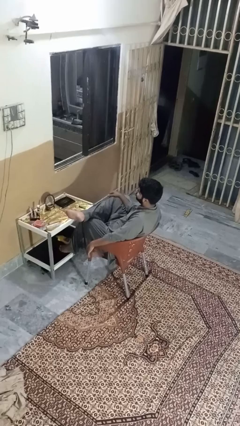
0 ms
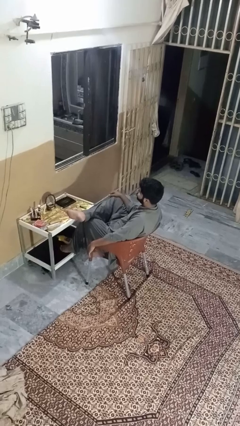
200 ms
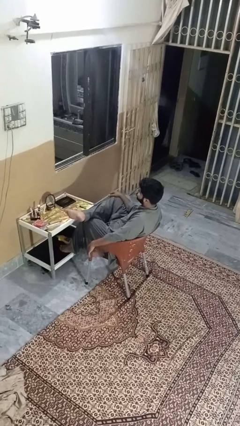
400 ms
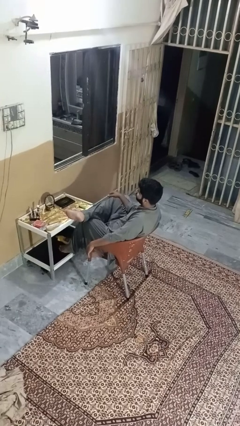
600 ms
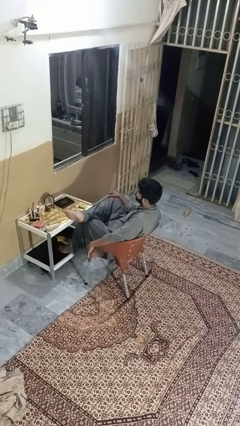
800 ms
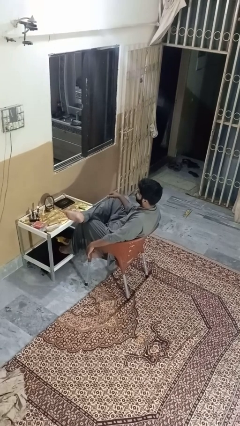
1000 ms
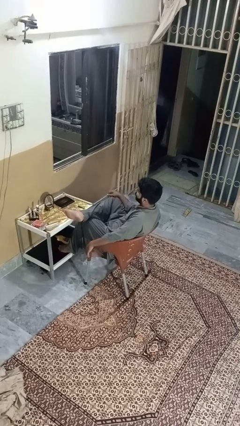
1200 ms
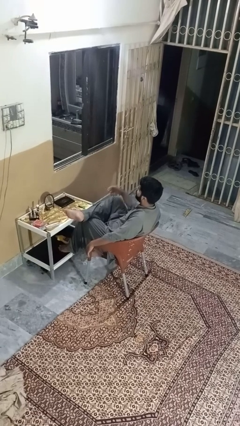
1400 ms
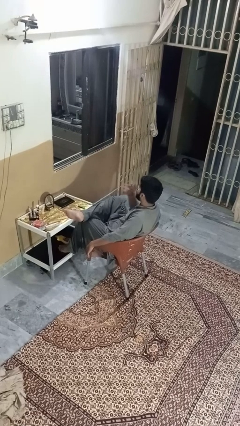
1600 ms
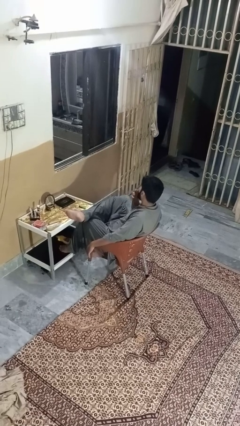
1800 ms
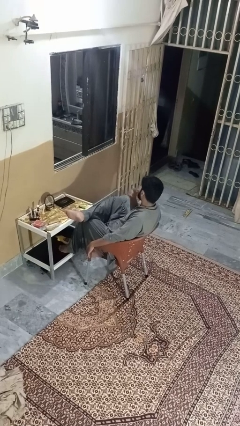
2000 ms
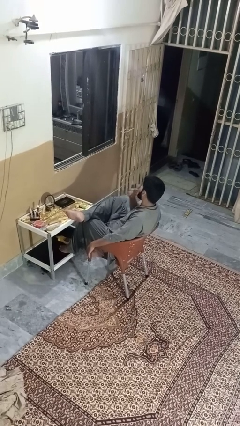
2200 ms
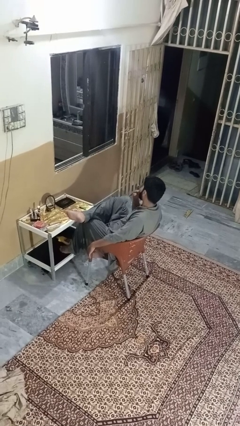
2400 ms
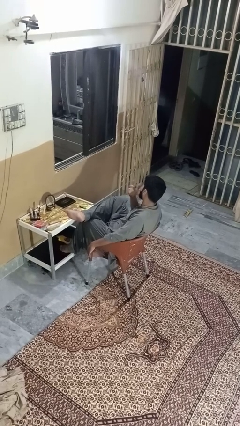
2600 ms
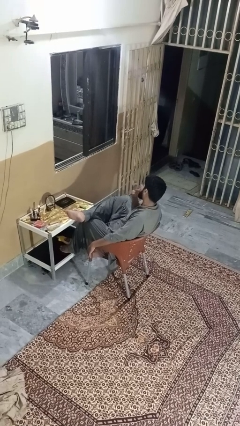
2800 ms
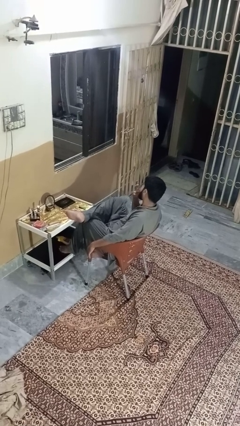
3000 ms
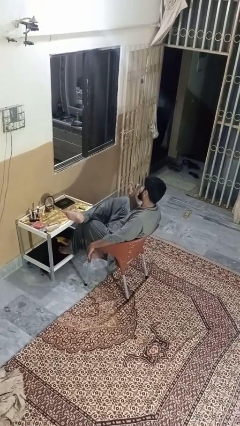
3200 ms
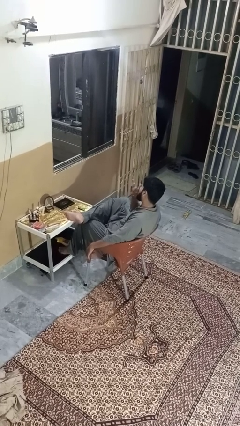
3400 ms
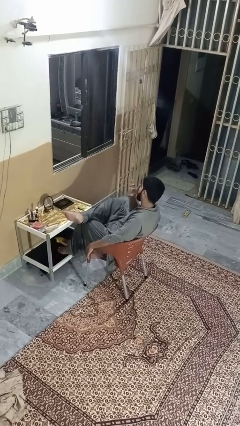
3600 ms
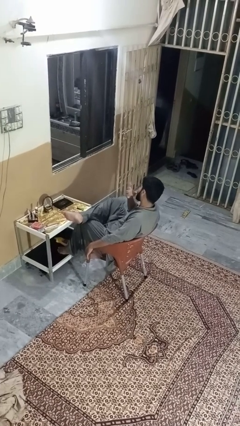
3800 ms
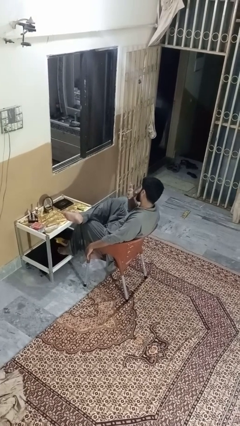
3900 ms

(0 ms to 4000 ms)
person licks fingers

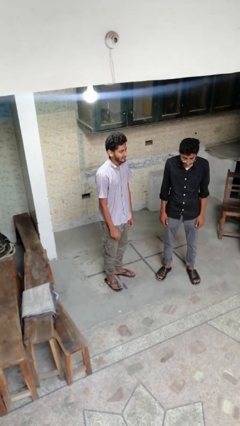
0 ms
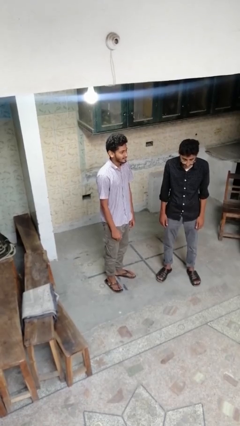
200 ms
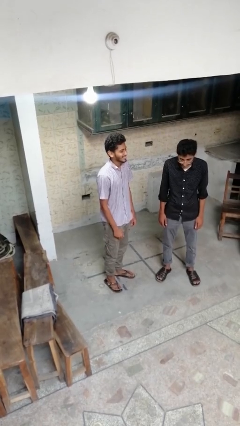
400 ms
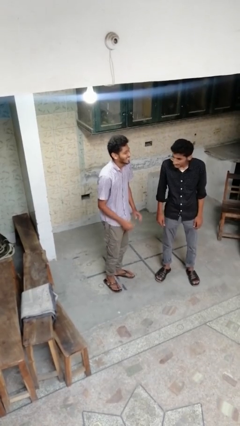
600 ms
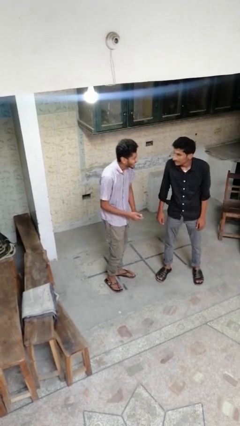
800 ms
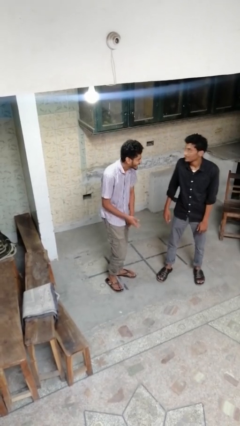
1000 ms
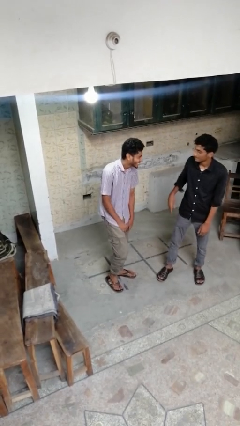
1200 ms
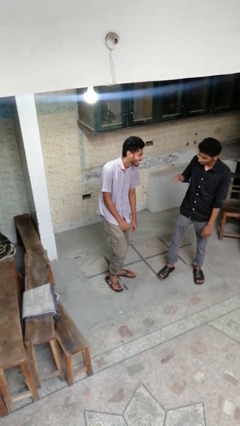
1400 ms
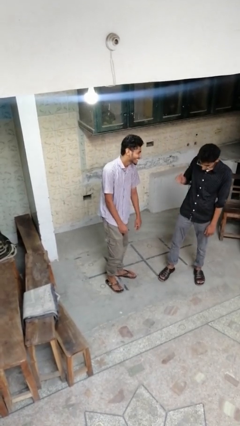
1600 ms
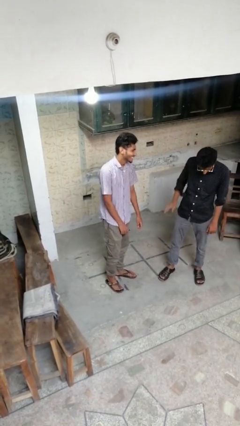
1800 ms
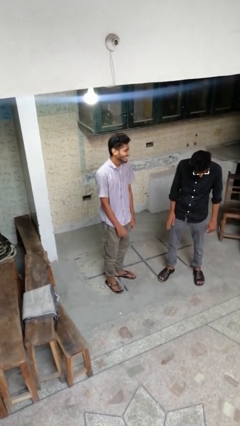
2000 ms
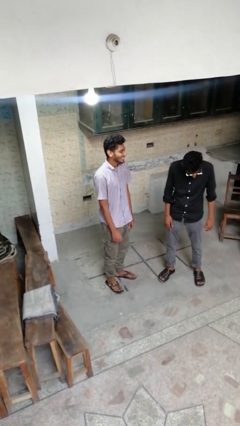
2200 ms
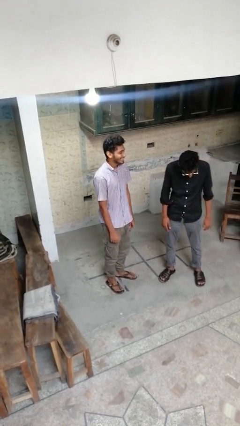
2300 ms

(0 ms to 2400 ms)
person laughs with person

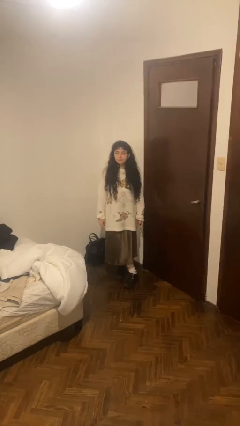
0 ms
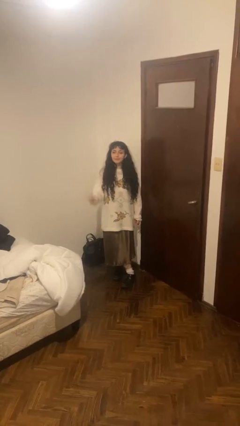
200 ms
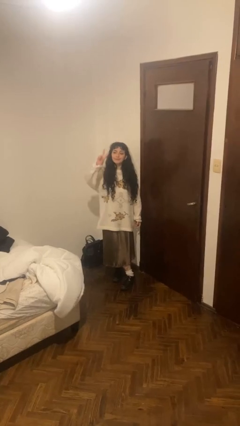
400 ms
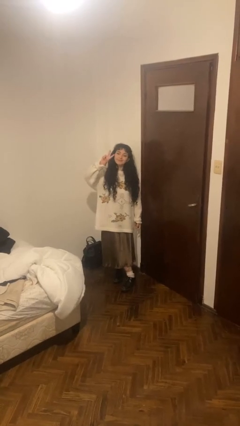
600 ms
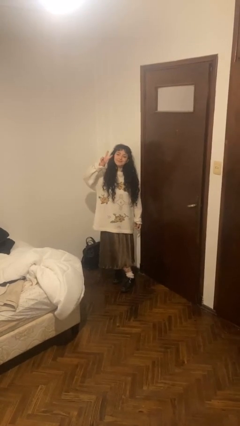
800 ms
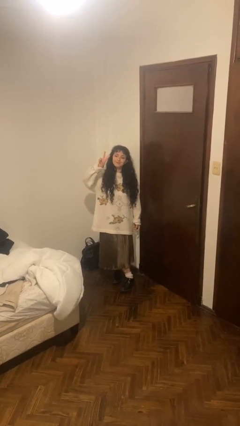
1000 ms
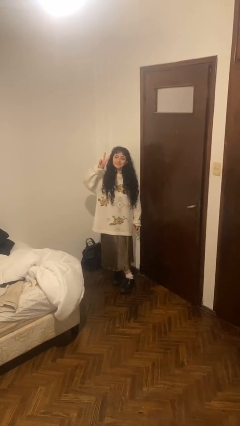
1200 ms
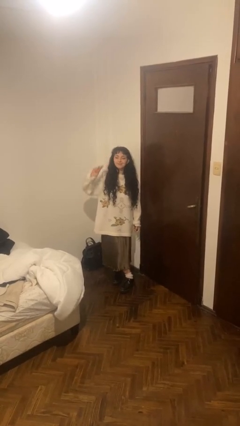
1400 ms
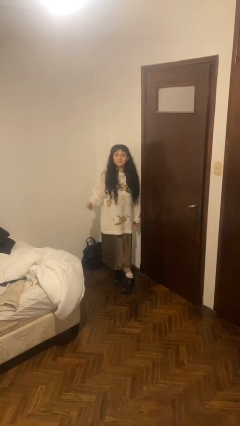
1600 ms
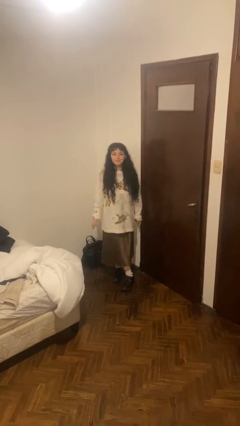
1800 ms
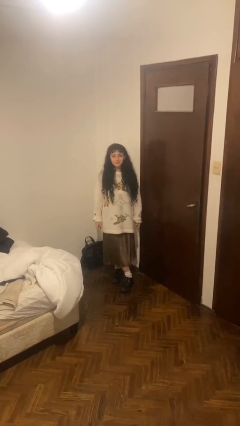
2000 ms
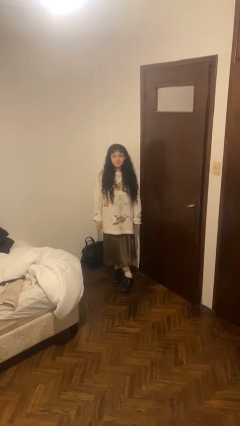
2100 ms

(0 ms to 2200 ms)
person gestures peace

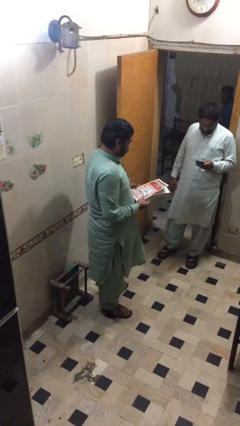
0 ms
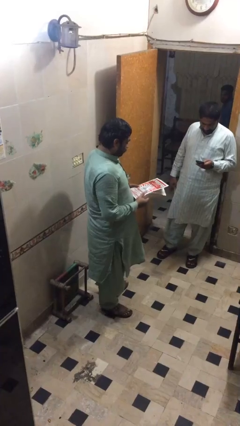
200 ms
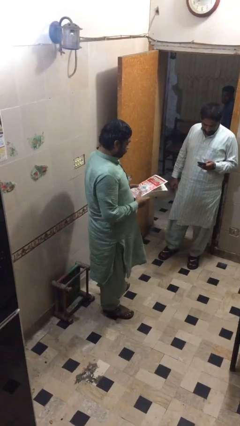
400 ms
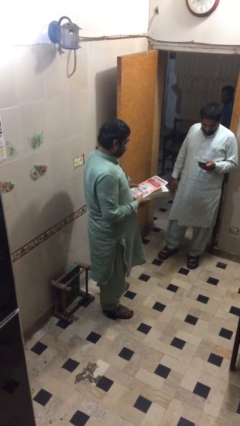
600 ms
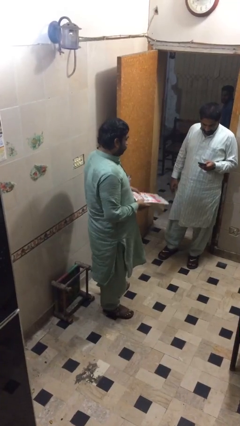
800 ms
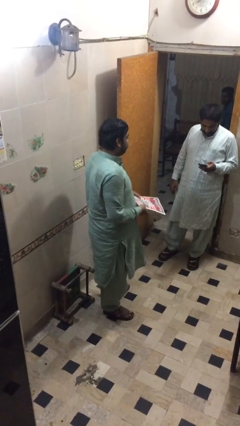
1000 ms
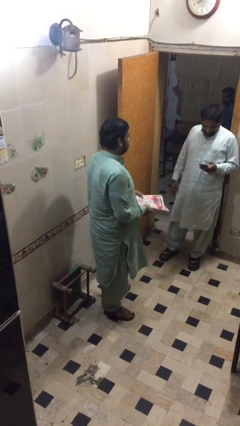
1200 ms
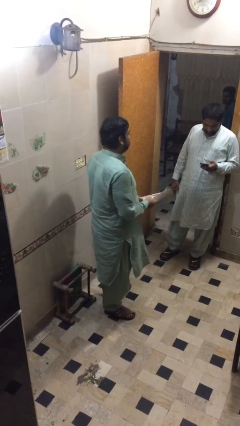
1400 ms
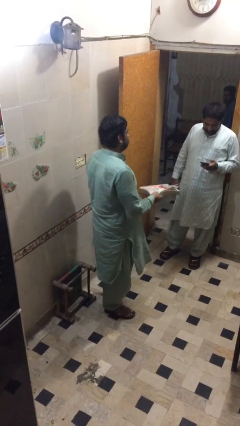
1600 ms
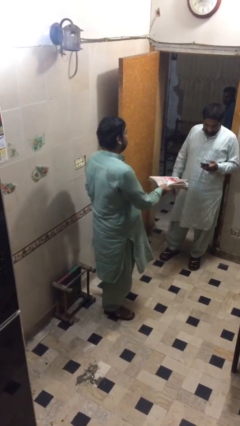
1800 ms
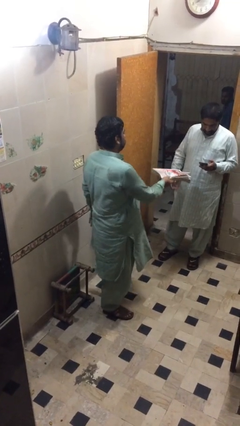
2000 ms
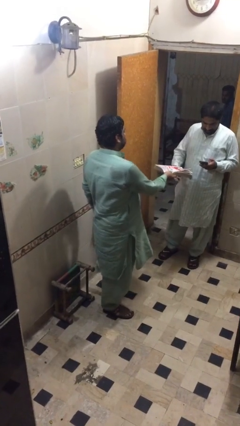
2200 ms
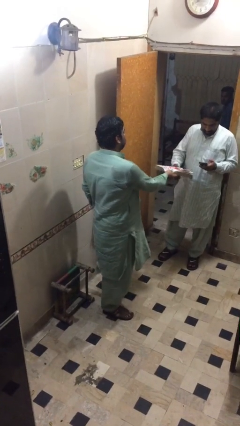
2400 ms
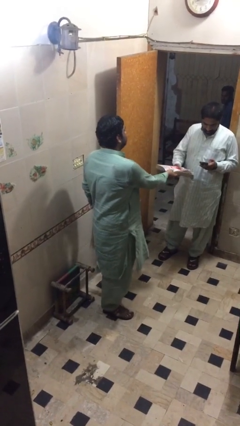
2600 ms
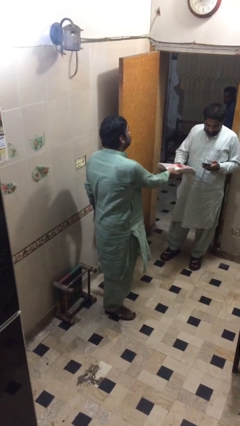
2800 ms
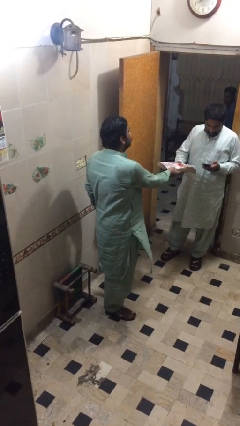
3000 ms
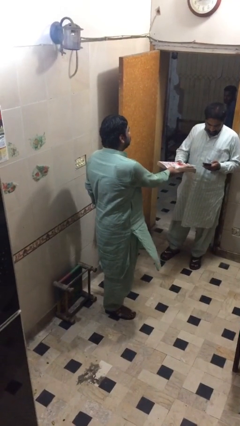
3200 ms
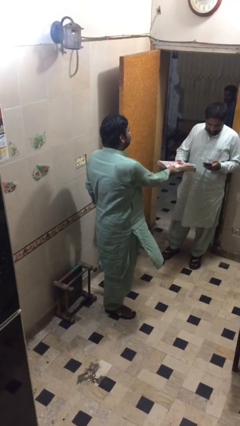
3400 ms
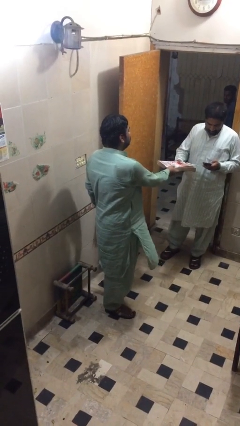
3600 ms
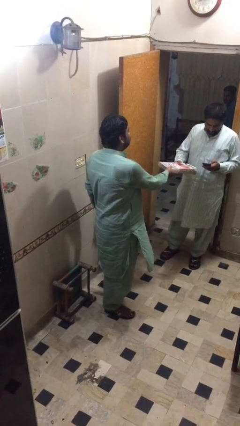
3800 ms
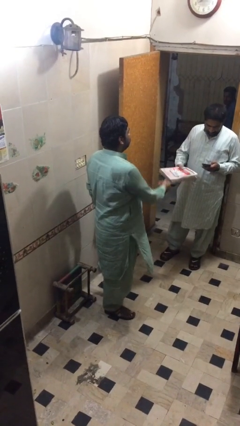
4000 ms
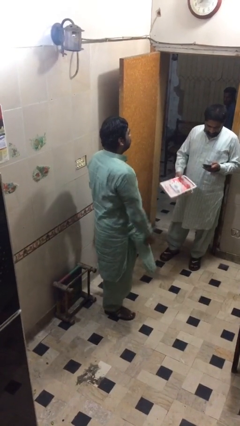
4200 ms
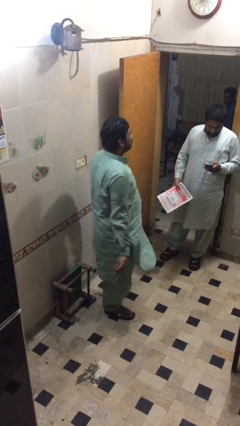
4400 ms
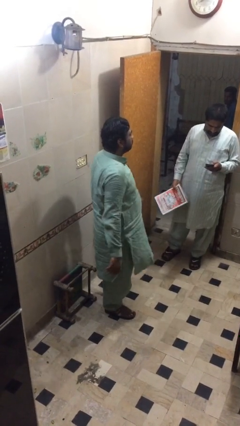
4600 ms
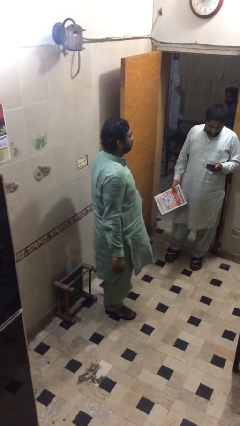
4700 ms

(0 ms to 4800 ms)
person transfers object to person

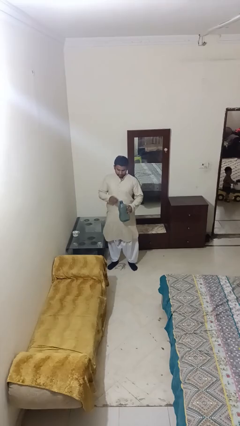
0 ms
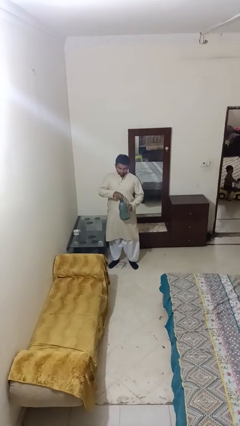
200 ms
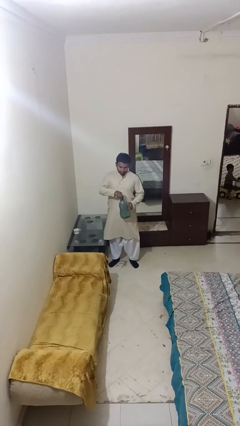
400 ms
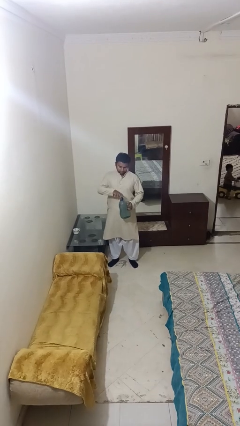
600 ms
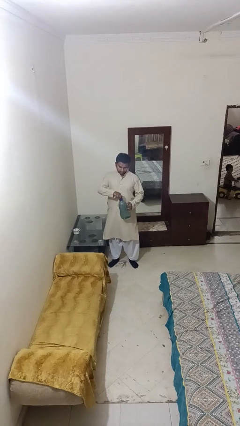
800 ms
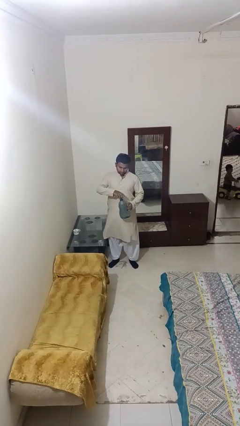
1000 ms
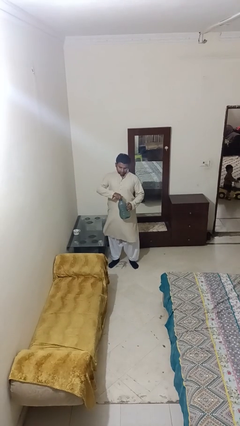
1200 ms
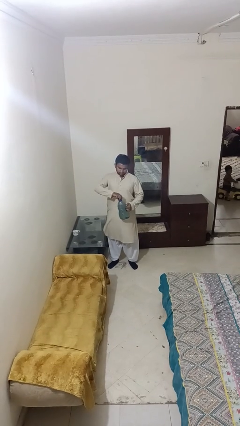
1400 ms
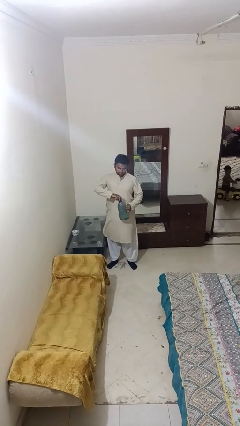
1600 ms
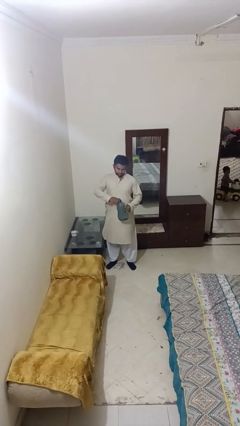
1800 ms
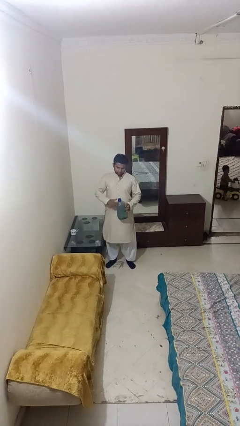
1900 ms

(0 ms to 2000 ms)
person screws lid to bottle

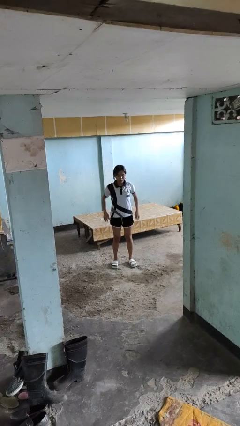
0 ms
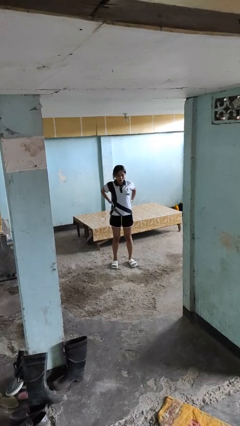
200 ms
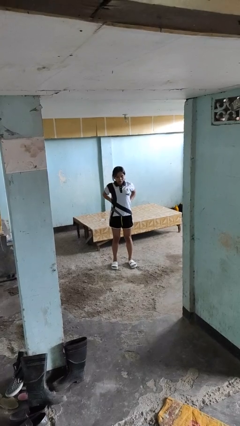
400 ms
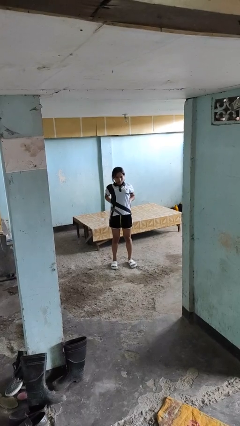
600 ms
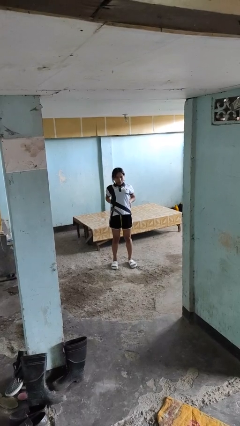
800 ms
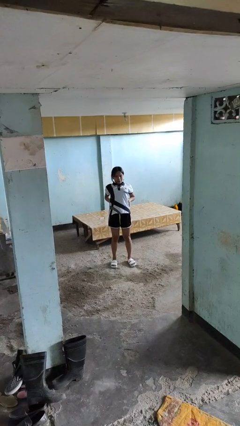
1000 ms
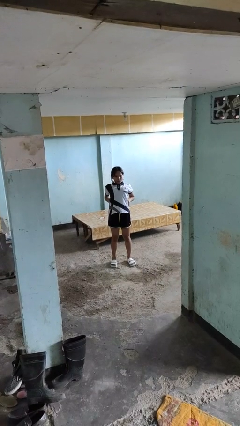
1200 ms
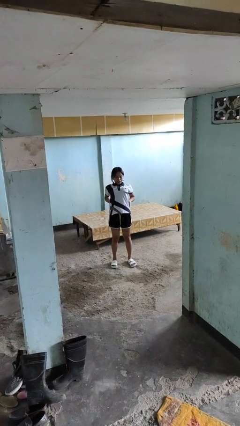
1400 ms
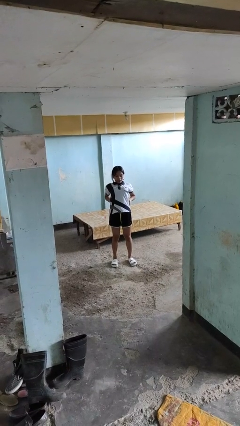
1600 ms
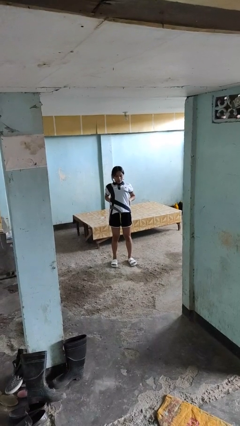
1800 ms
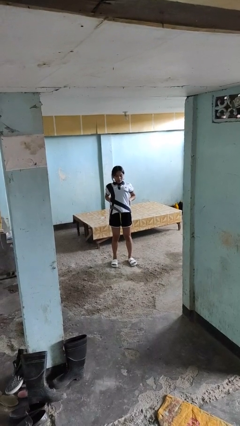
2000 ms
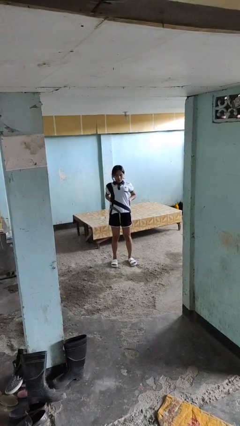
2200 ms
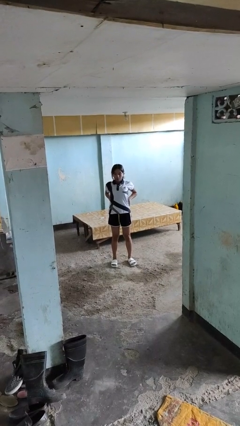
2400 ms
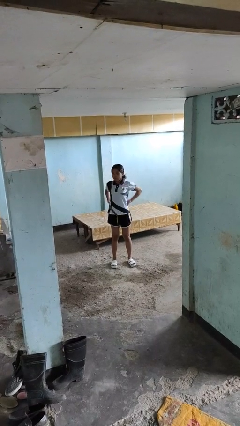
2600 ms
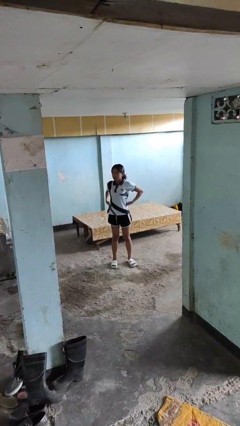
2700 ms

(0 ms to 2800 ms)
person stretches back
